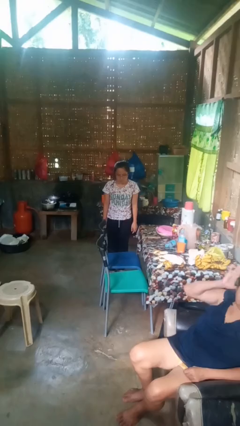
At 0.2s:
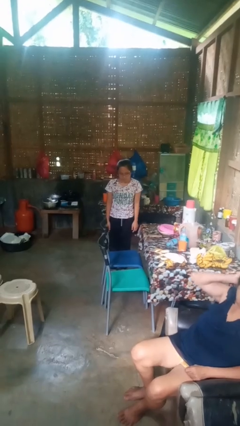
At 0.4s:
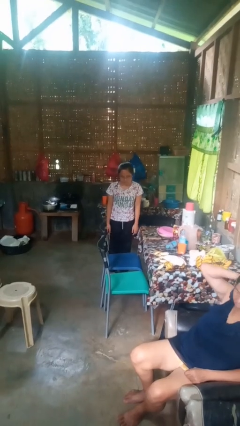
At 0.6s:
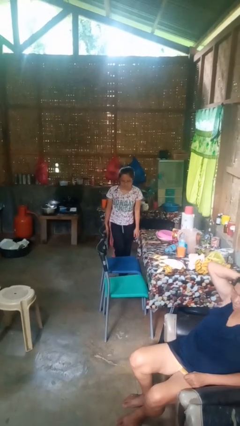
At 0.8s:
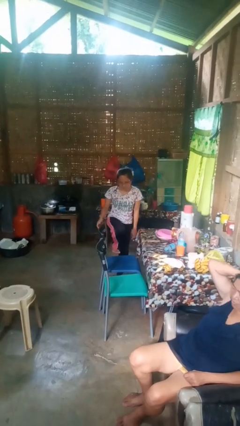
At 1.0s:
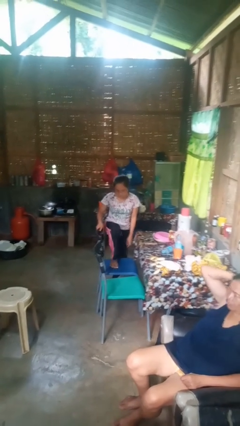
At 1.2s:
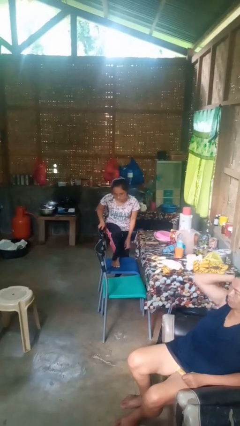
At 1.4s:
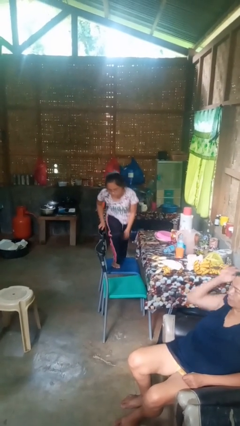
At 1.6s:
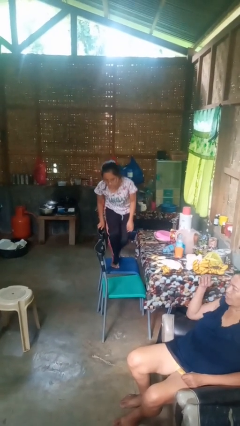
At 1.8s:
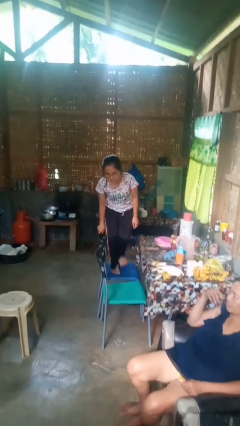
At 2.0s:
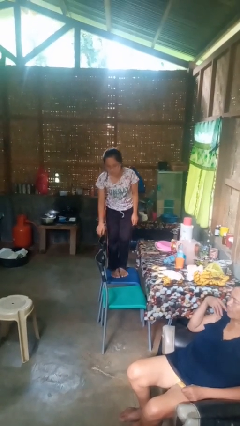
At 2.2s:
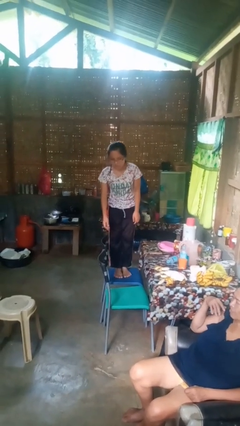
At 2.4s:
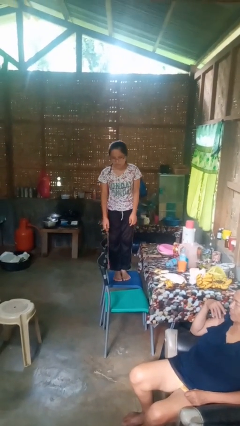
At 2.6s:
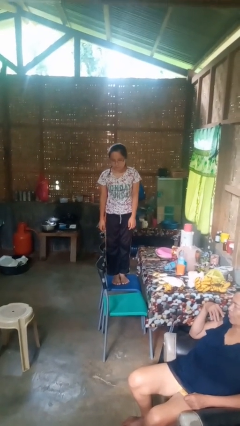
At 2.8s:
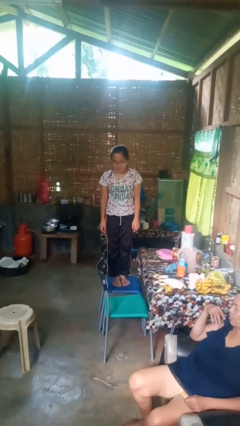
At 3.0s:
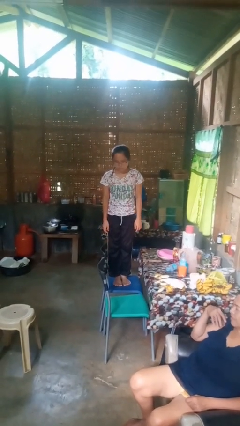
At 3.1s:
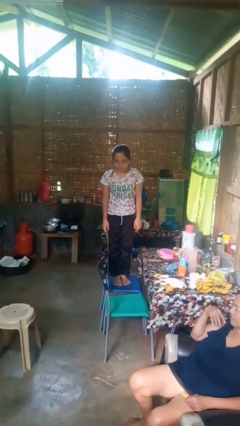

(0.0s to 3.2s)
person climbs on chair

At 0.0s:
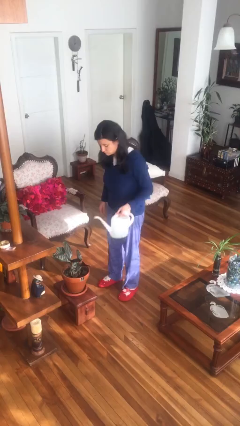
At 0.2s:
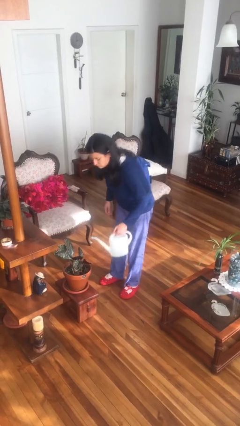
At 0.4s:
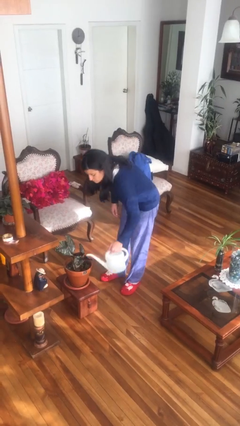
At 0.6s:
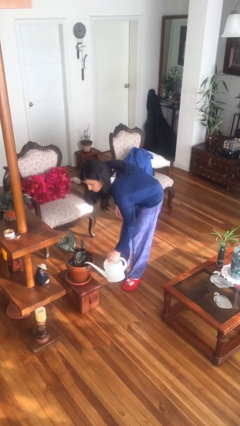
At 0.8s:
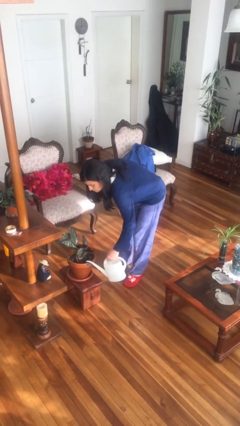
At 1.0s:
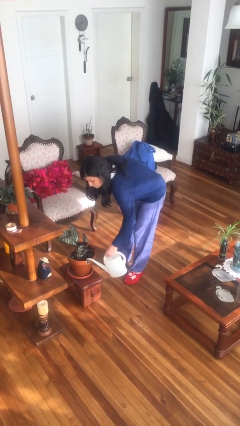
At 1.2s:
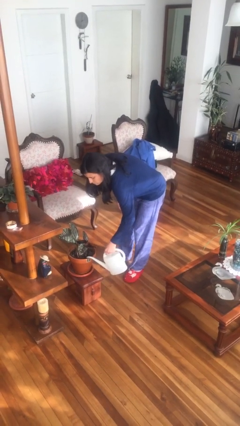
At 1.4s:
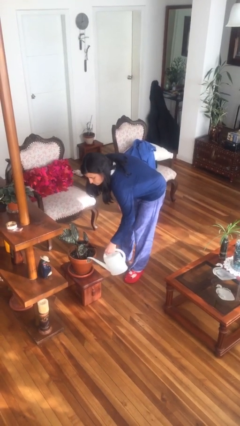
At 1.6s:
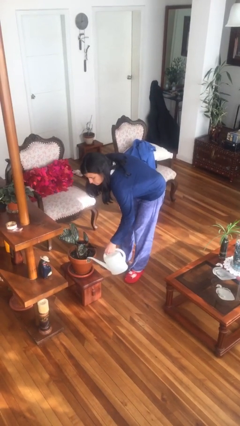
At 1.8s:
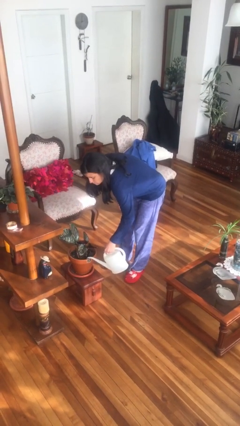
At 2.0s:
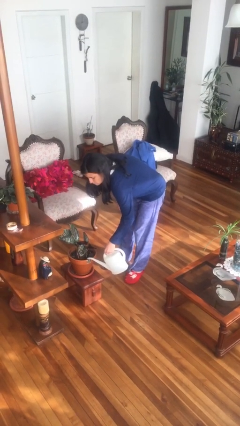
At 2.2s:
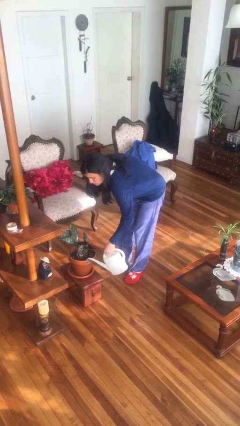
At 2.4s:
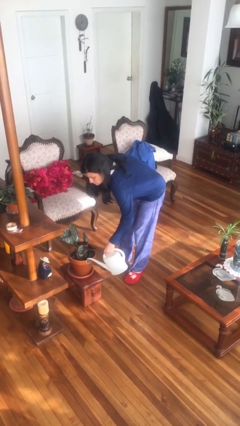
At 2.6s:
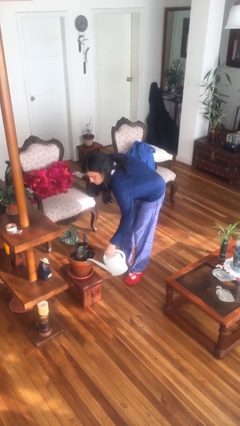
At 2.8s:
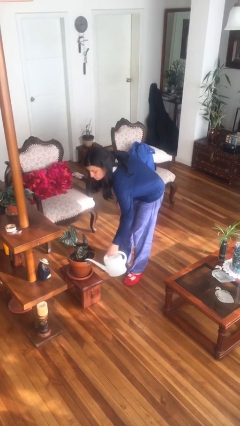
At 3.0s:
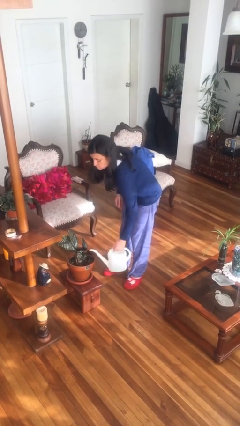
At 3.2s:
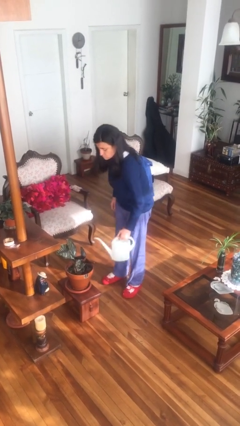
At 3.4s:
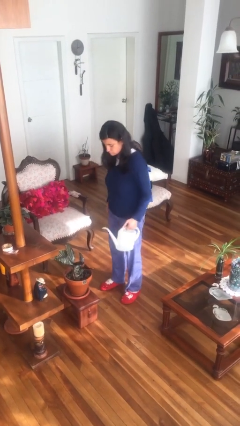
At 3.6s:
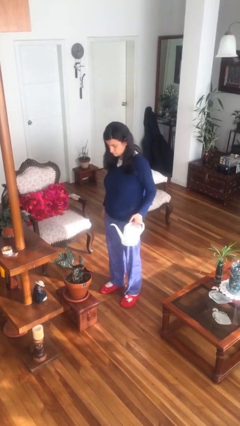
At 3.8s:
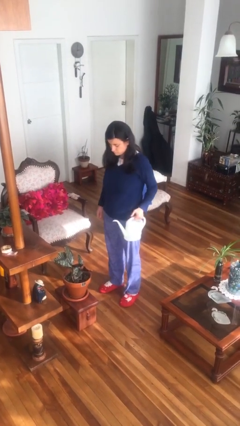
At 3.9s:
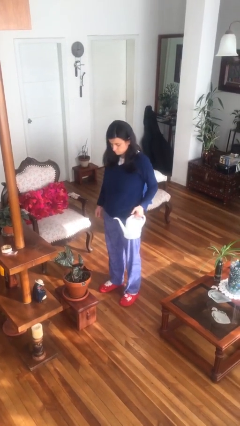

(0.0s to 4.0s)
person waters houseplant

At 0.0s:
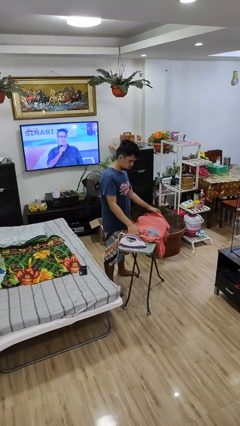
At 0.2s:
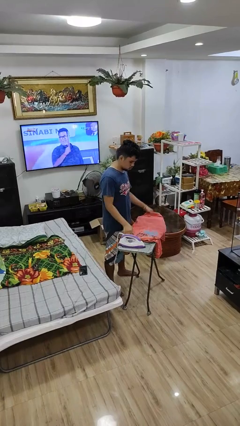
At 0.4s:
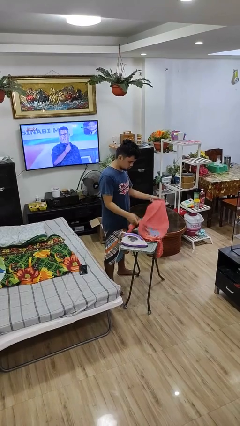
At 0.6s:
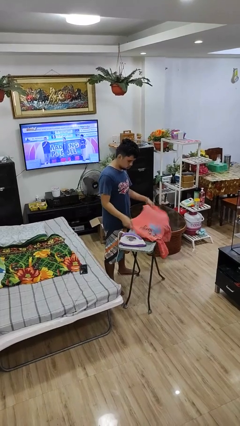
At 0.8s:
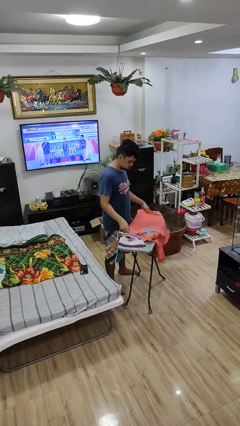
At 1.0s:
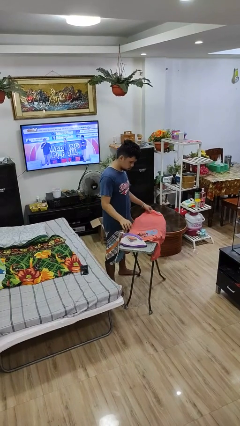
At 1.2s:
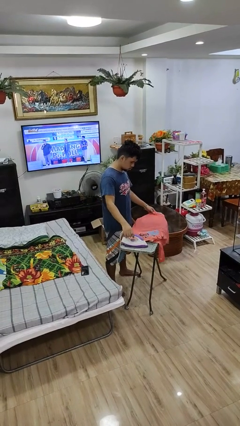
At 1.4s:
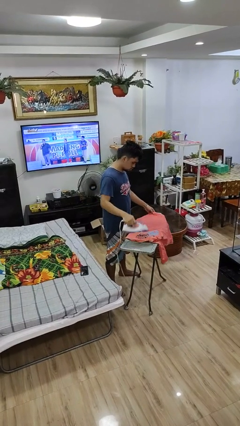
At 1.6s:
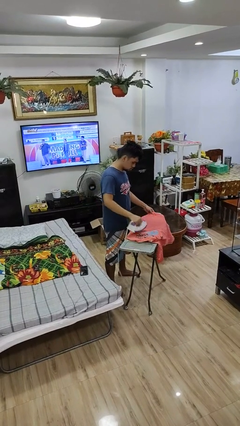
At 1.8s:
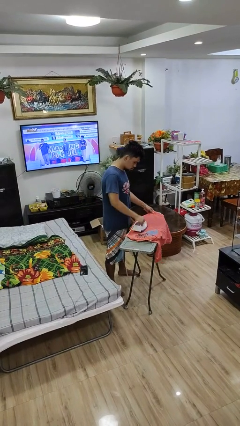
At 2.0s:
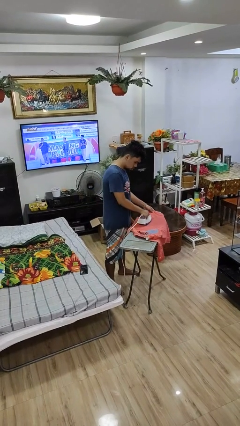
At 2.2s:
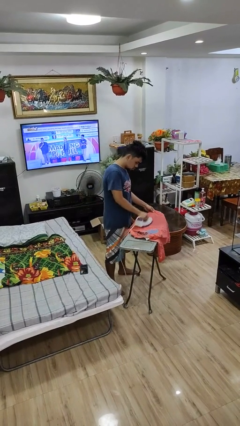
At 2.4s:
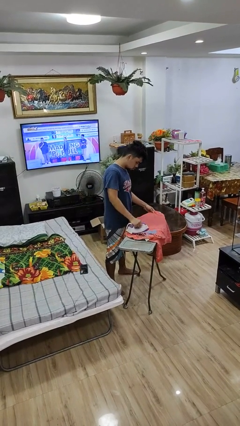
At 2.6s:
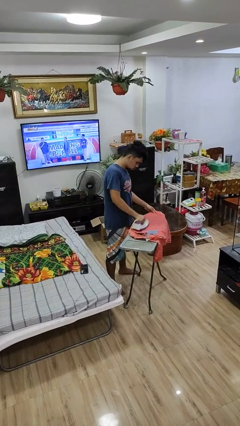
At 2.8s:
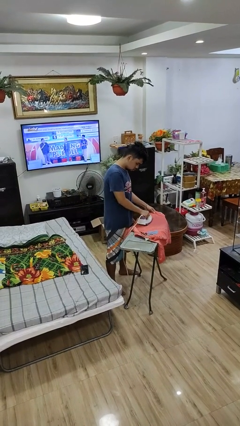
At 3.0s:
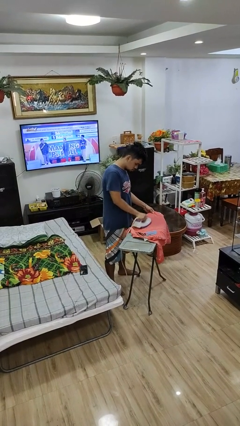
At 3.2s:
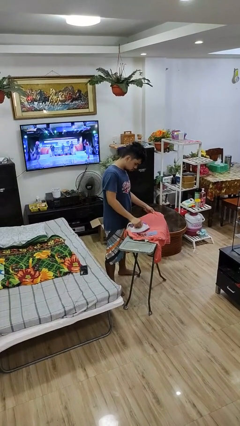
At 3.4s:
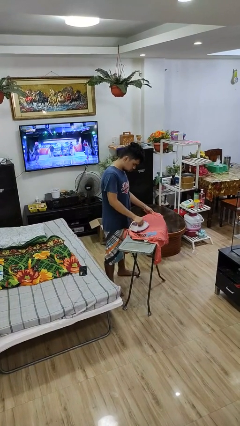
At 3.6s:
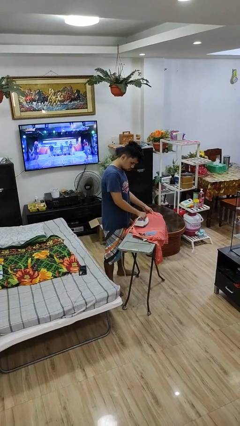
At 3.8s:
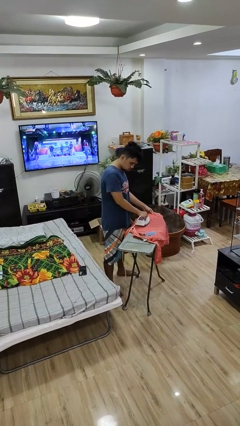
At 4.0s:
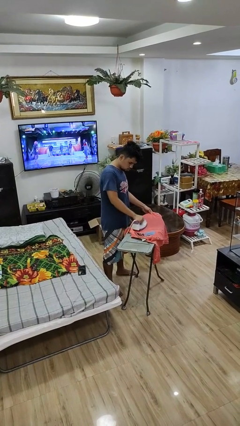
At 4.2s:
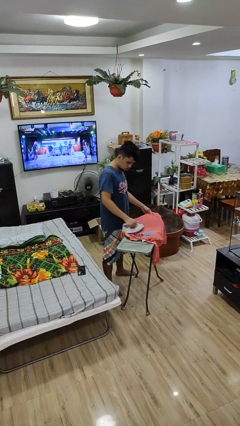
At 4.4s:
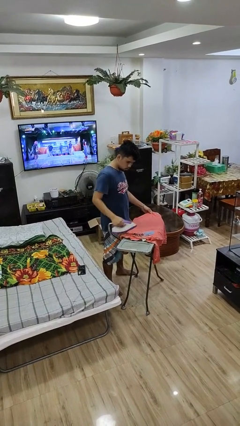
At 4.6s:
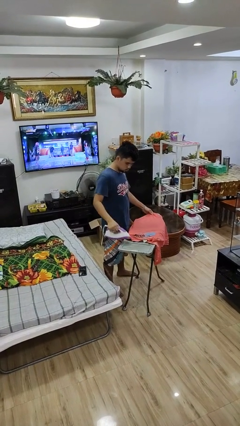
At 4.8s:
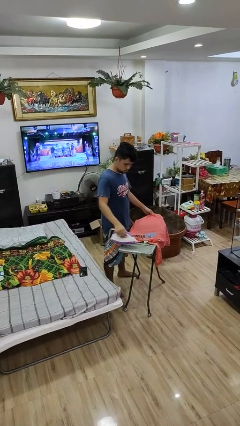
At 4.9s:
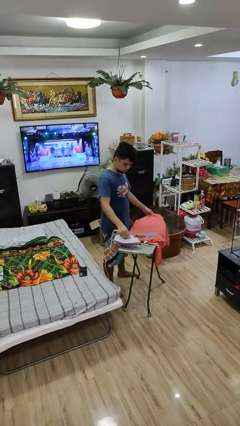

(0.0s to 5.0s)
person irons clothes

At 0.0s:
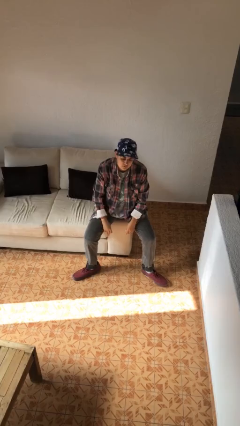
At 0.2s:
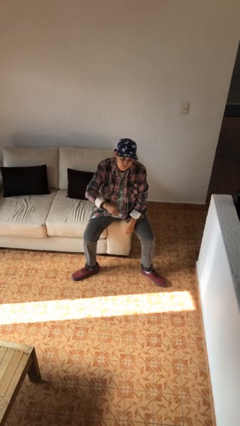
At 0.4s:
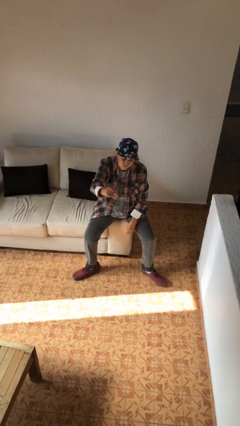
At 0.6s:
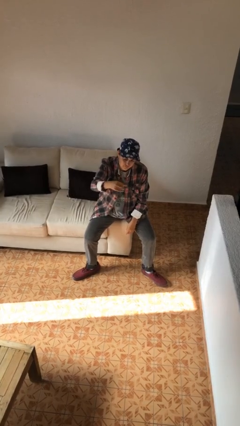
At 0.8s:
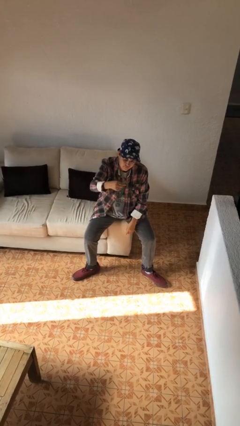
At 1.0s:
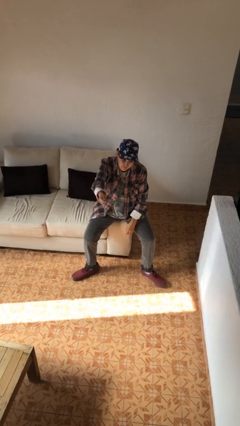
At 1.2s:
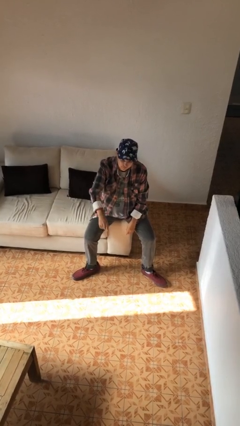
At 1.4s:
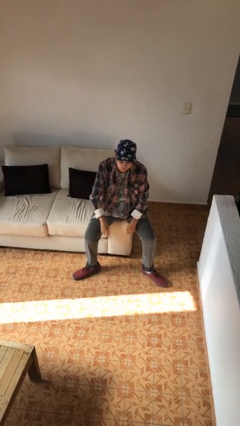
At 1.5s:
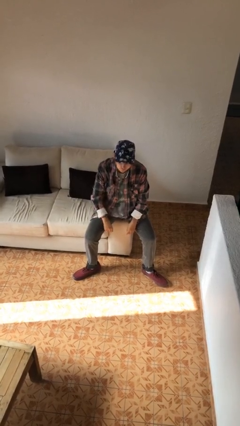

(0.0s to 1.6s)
person snaps fingers

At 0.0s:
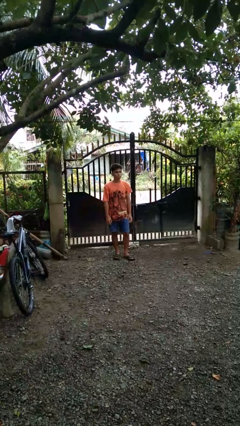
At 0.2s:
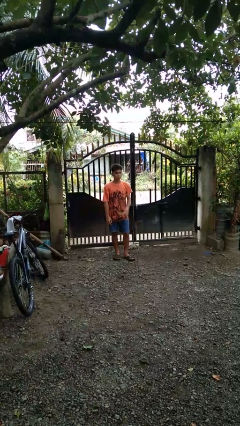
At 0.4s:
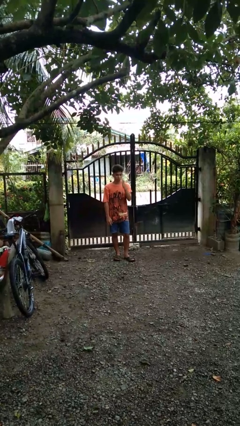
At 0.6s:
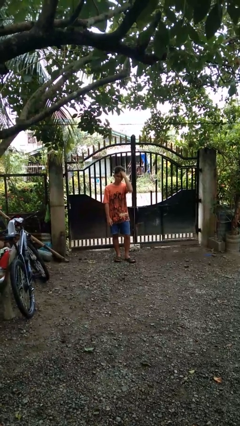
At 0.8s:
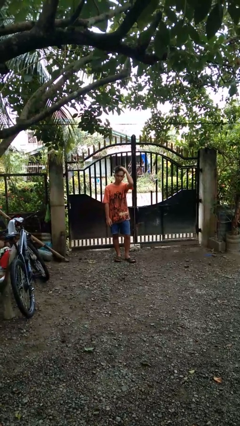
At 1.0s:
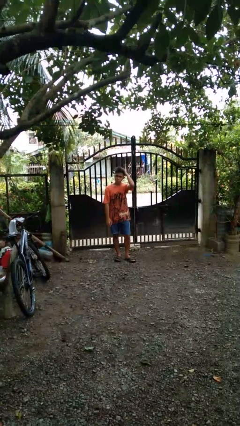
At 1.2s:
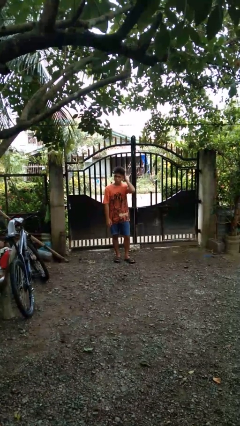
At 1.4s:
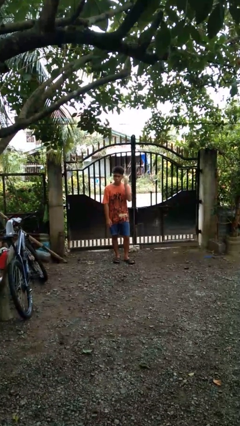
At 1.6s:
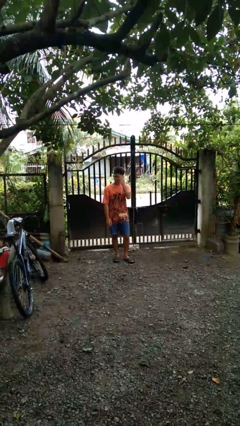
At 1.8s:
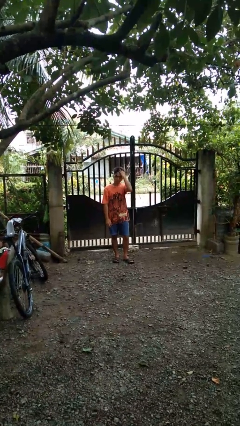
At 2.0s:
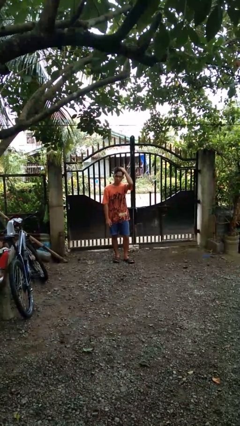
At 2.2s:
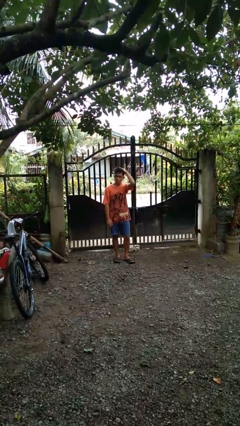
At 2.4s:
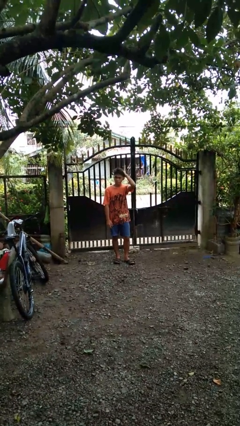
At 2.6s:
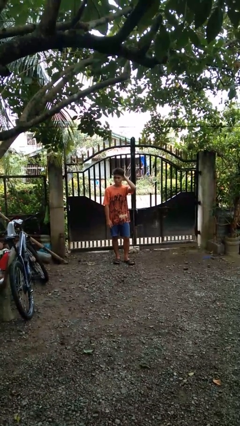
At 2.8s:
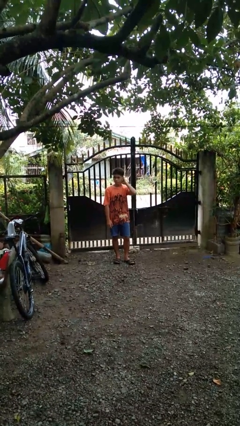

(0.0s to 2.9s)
person strokes hair

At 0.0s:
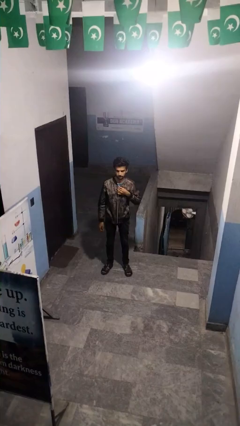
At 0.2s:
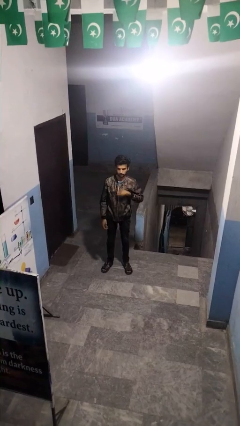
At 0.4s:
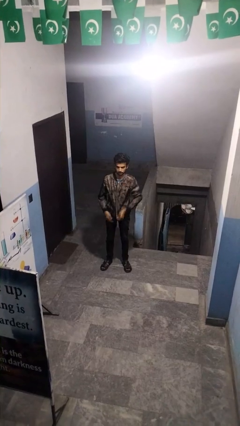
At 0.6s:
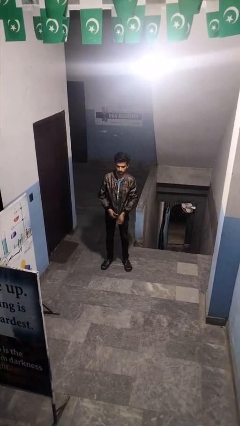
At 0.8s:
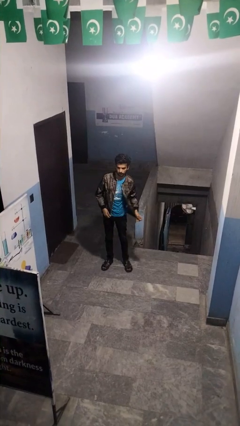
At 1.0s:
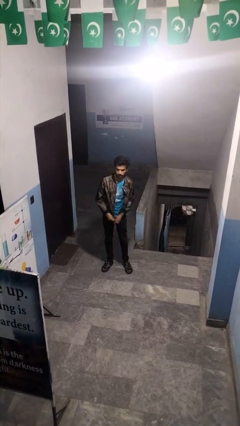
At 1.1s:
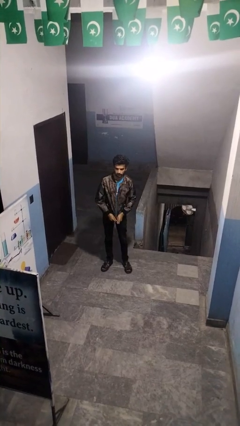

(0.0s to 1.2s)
person unzips jacket
